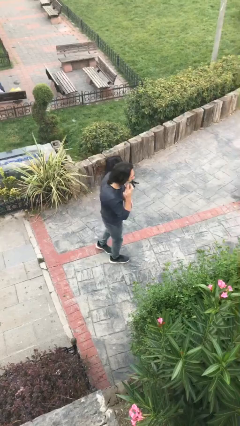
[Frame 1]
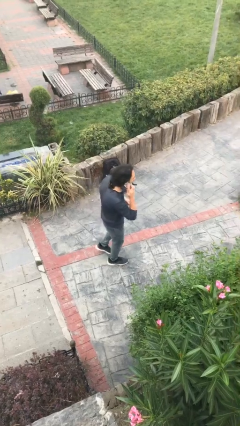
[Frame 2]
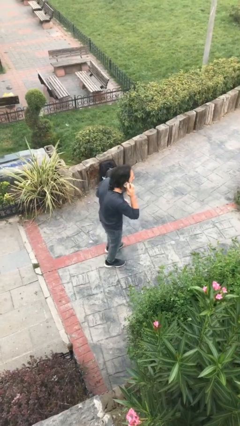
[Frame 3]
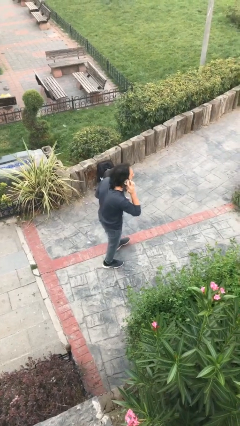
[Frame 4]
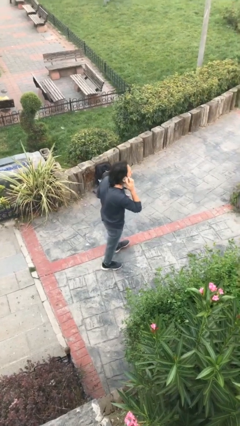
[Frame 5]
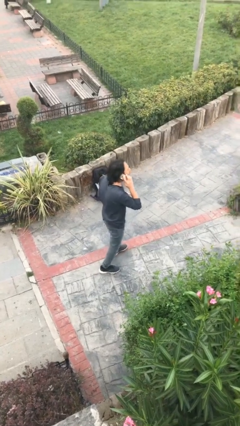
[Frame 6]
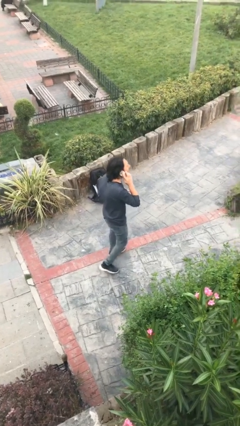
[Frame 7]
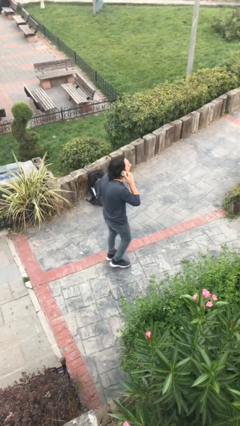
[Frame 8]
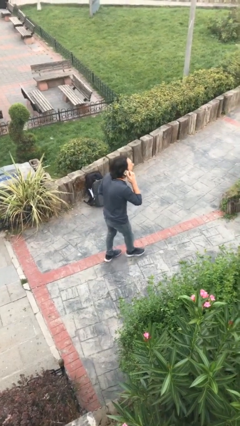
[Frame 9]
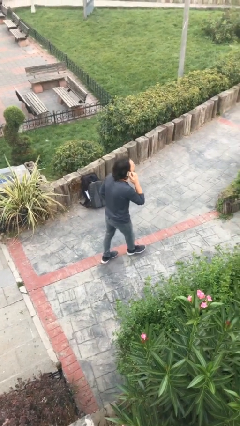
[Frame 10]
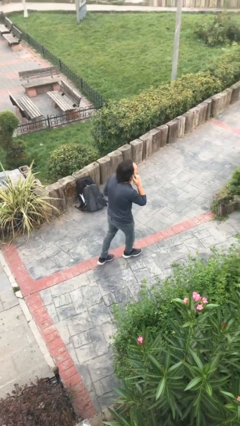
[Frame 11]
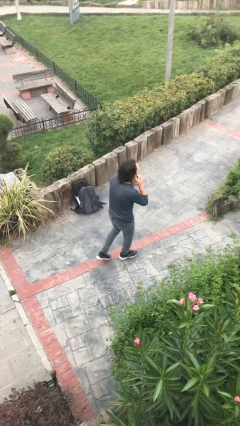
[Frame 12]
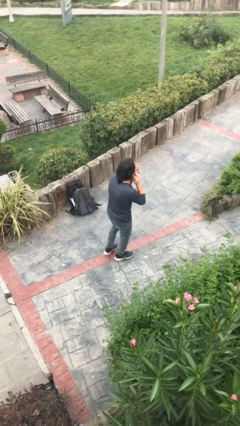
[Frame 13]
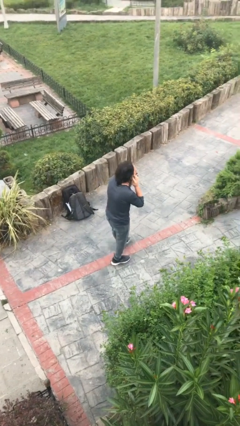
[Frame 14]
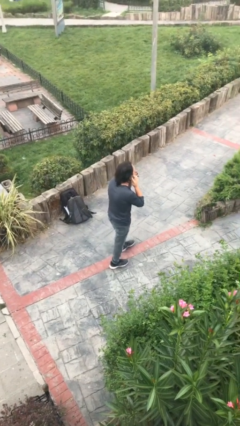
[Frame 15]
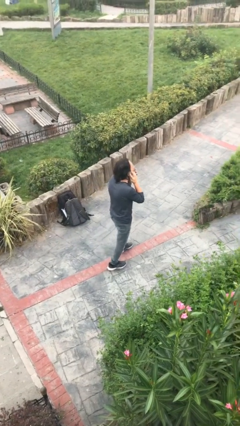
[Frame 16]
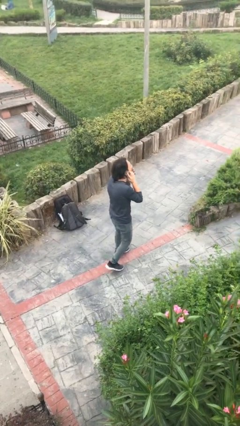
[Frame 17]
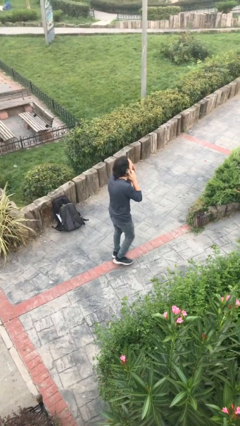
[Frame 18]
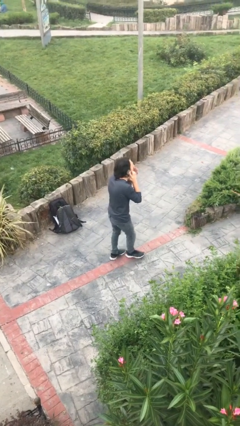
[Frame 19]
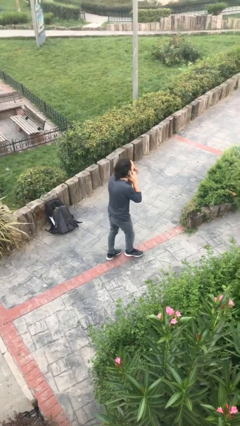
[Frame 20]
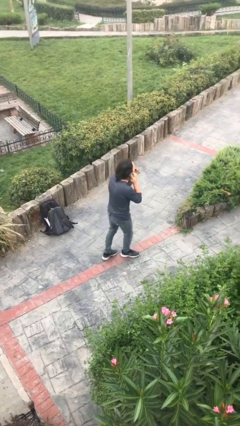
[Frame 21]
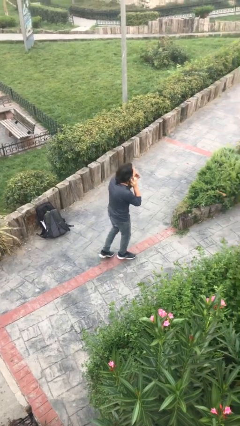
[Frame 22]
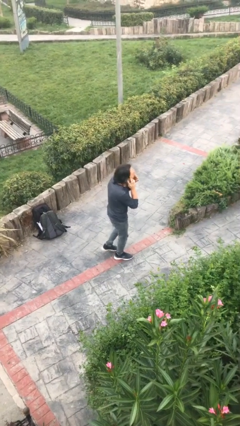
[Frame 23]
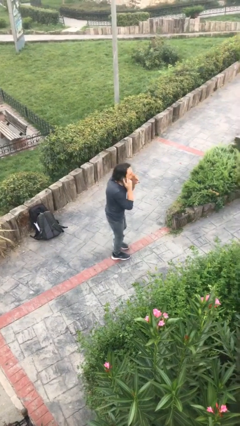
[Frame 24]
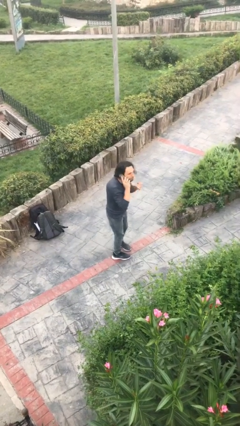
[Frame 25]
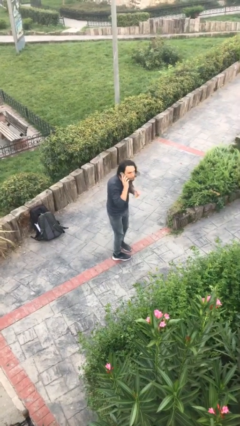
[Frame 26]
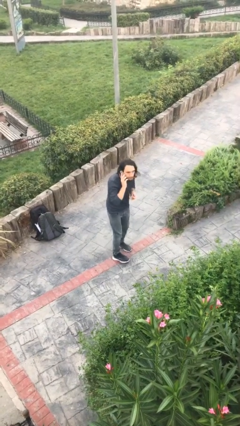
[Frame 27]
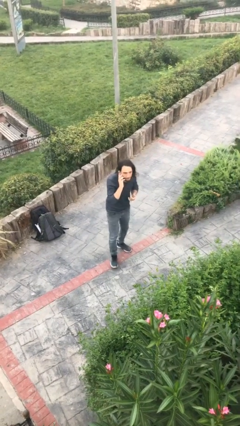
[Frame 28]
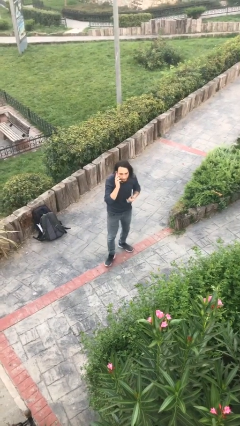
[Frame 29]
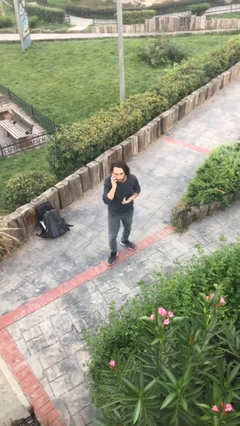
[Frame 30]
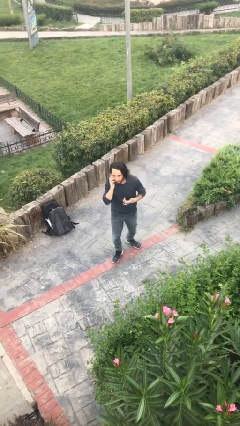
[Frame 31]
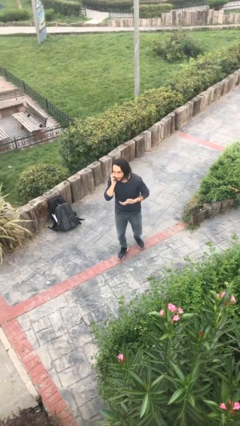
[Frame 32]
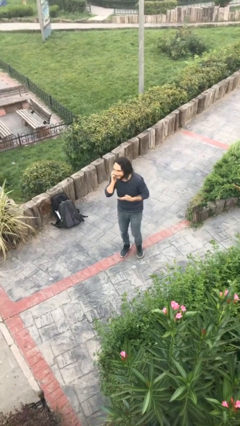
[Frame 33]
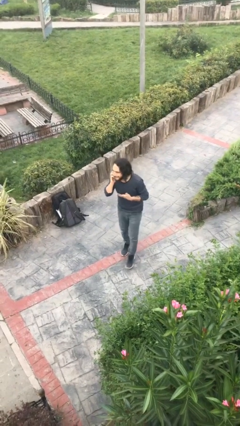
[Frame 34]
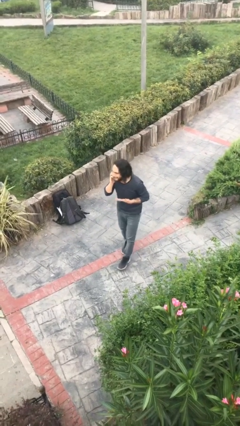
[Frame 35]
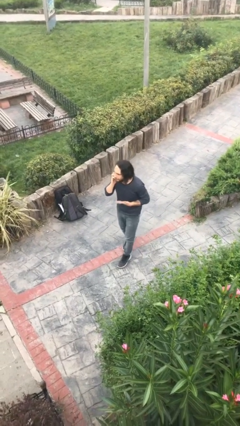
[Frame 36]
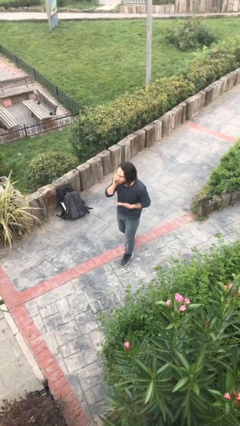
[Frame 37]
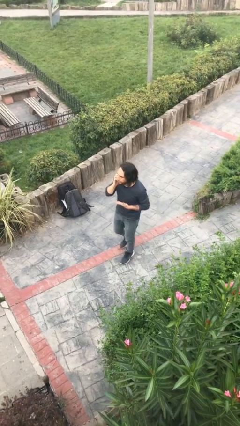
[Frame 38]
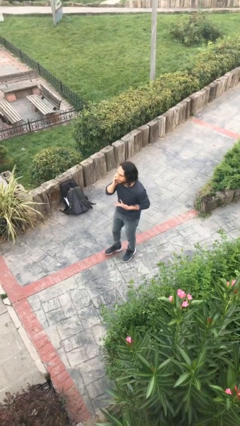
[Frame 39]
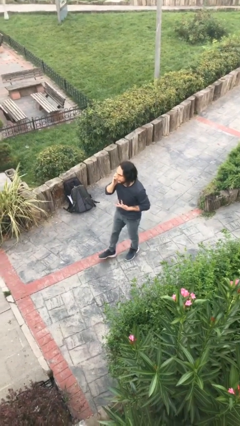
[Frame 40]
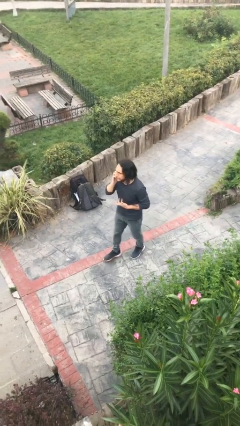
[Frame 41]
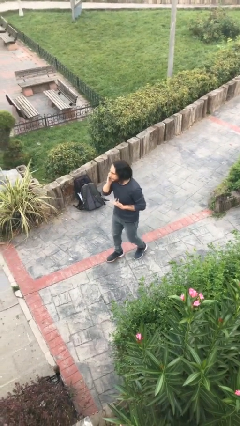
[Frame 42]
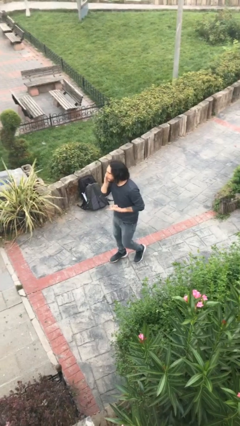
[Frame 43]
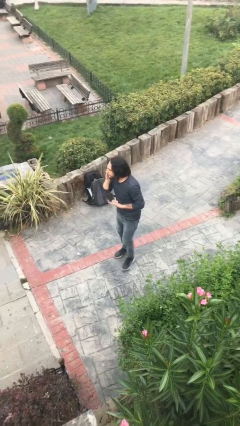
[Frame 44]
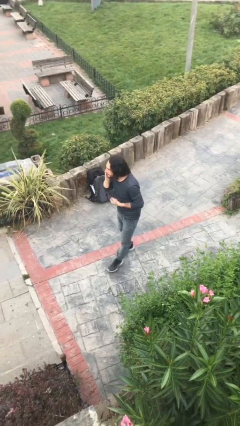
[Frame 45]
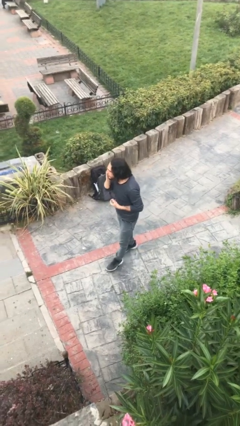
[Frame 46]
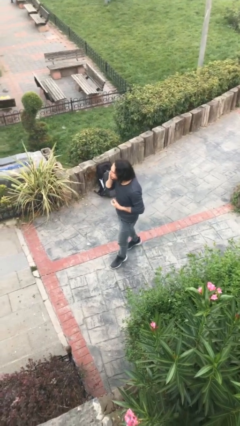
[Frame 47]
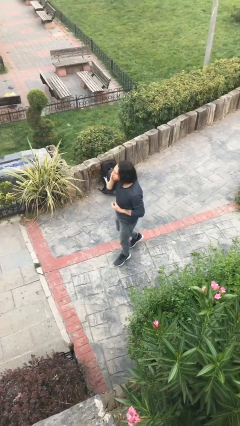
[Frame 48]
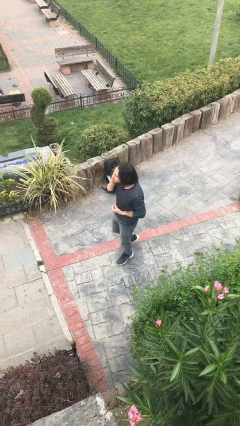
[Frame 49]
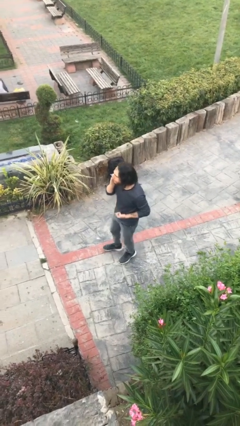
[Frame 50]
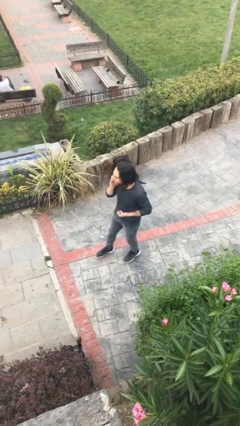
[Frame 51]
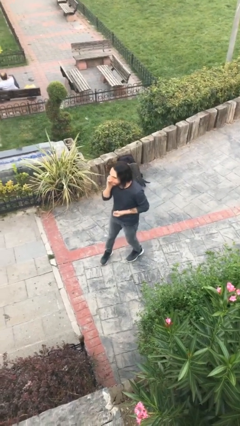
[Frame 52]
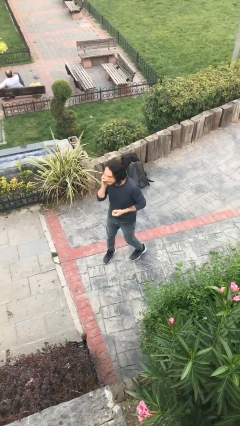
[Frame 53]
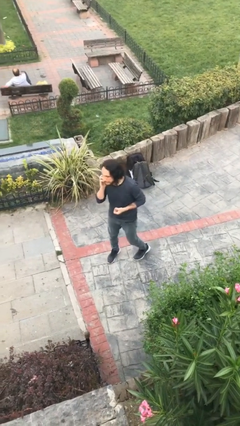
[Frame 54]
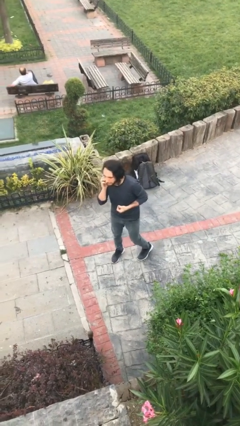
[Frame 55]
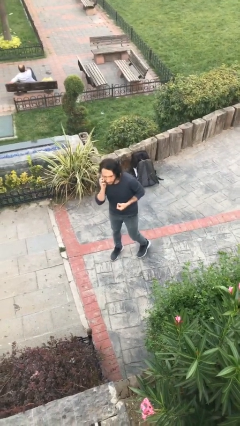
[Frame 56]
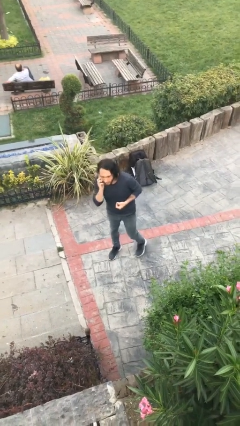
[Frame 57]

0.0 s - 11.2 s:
person talks on phone

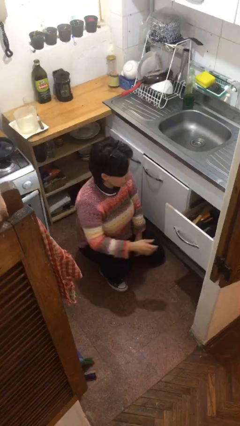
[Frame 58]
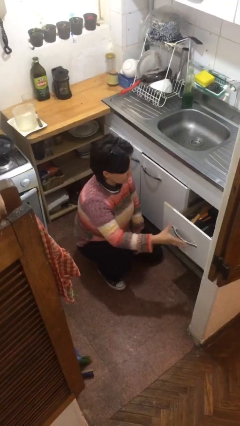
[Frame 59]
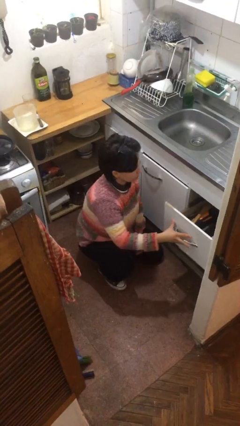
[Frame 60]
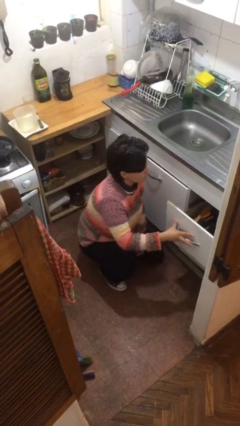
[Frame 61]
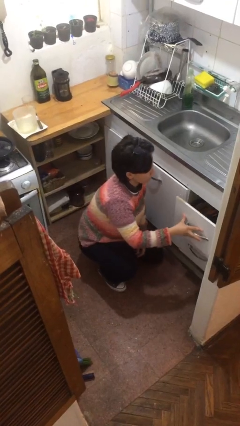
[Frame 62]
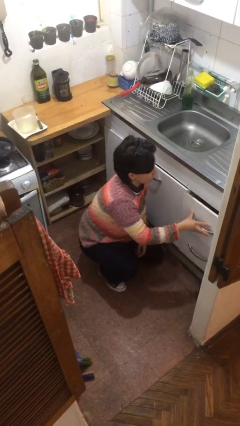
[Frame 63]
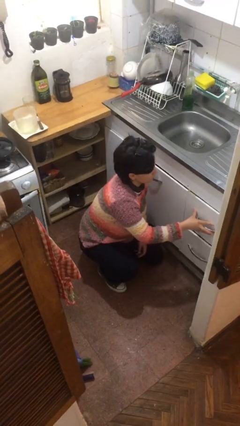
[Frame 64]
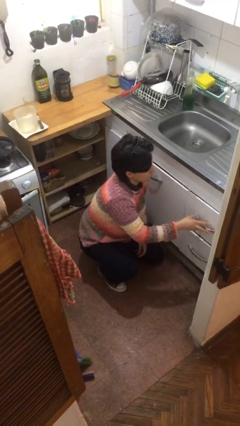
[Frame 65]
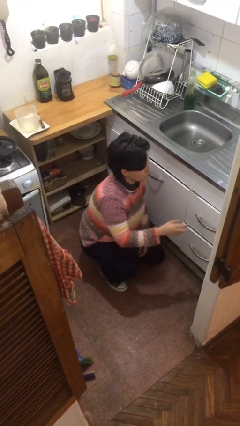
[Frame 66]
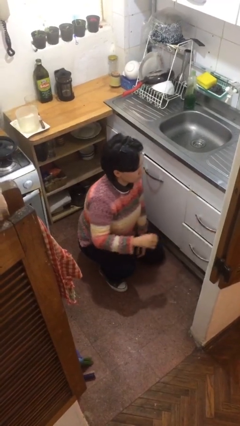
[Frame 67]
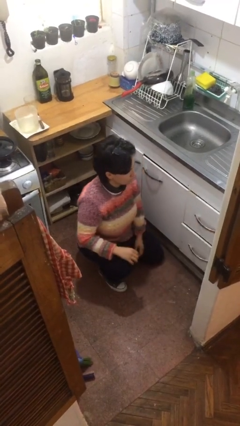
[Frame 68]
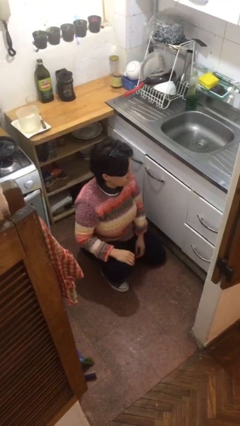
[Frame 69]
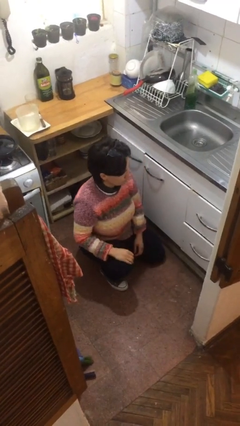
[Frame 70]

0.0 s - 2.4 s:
person closes kitchen drawer

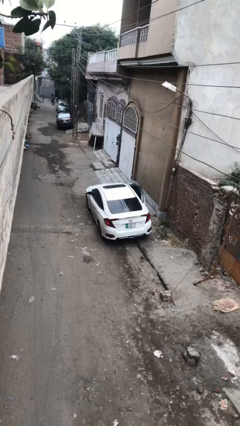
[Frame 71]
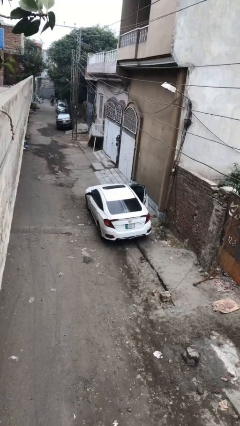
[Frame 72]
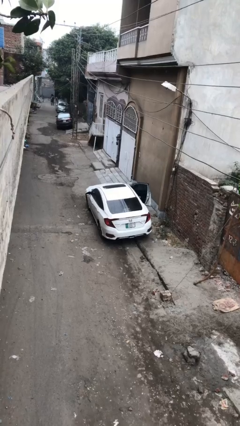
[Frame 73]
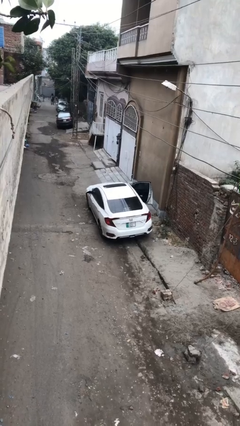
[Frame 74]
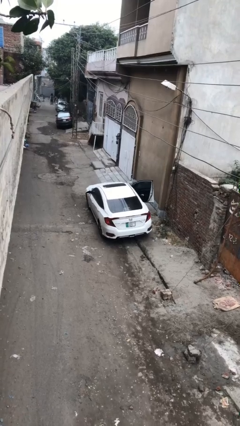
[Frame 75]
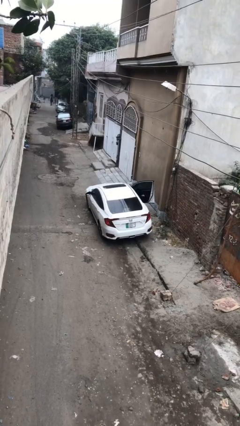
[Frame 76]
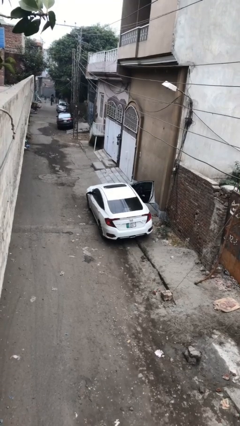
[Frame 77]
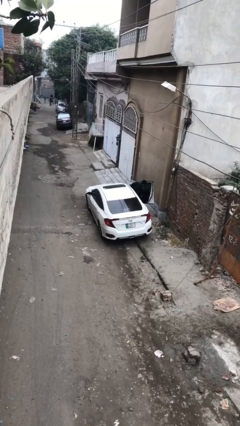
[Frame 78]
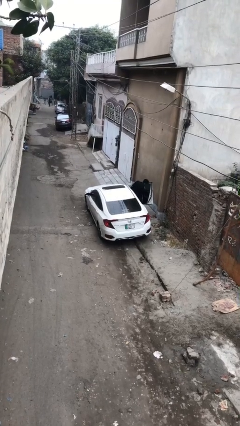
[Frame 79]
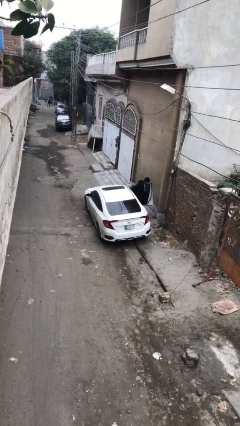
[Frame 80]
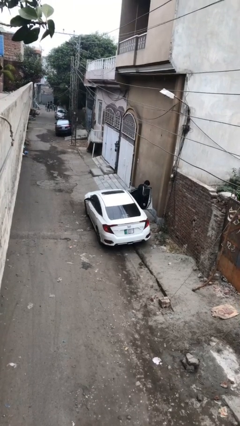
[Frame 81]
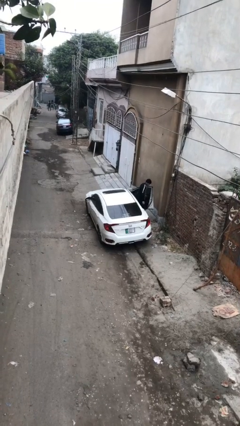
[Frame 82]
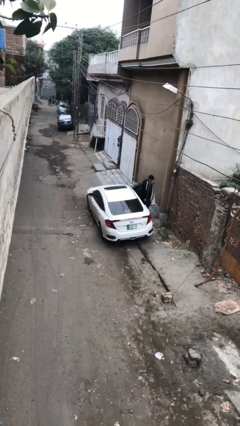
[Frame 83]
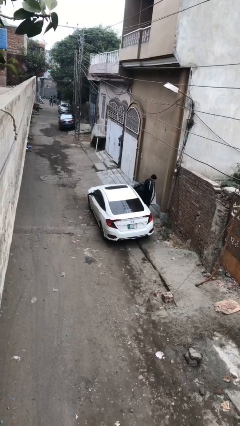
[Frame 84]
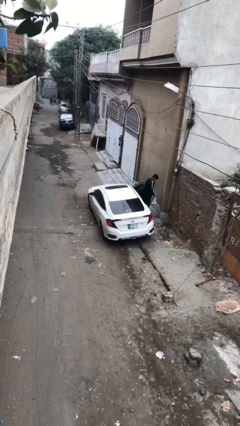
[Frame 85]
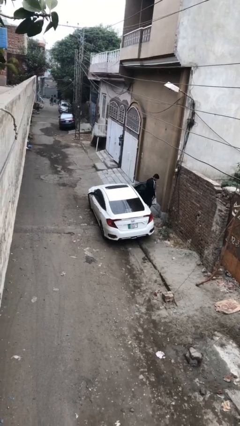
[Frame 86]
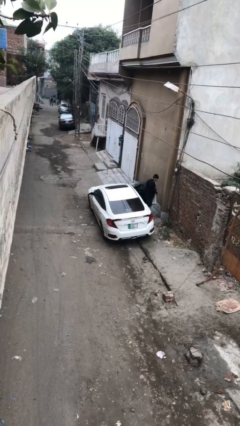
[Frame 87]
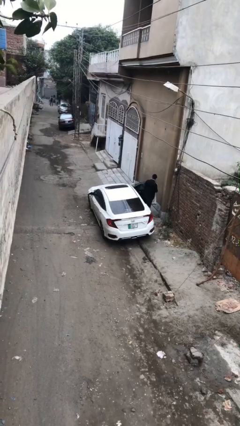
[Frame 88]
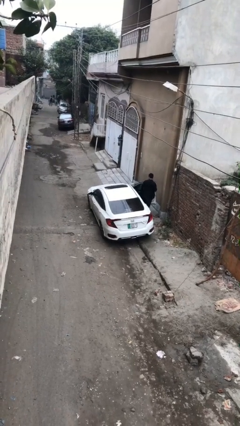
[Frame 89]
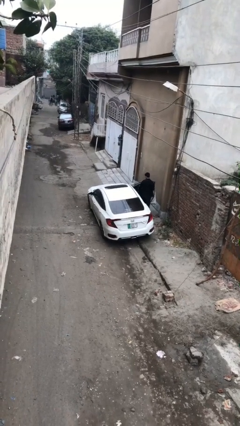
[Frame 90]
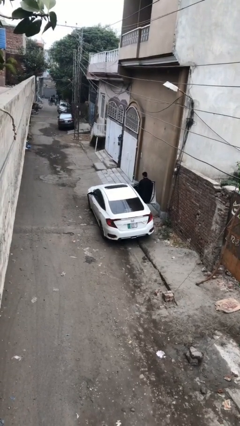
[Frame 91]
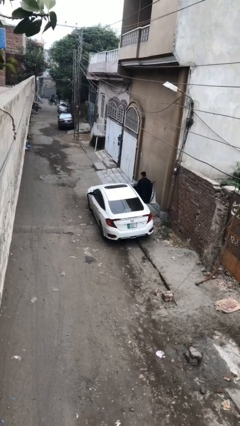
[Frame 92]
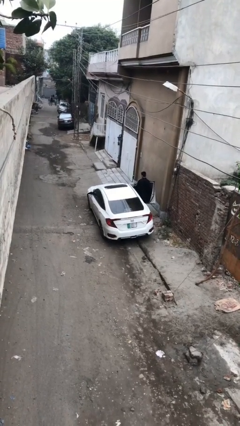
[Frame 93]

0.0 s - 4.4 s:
car drops off person
